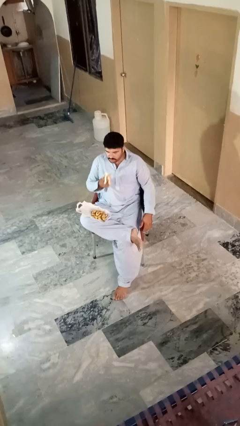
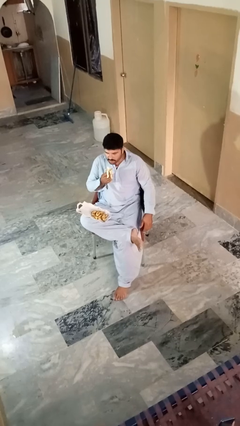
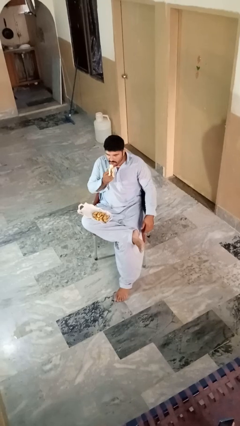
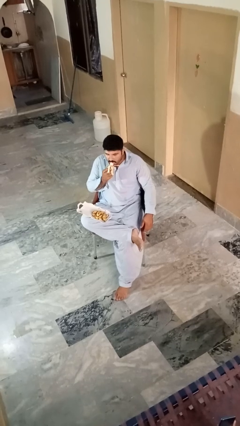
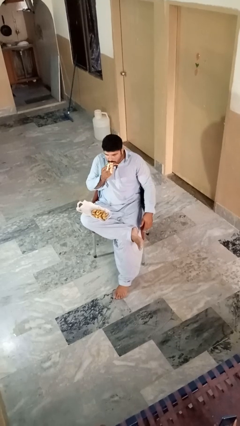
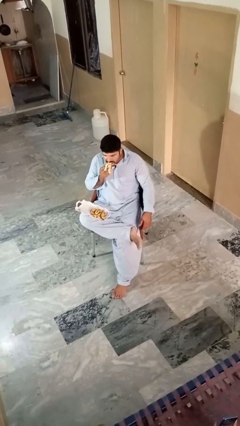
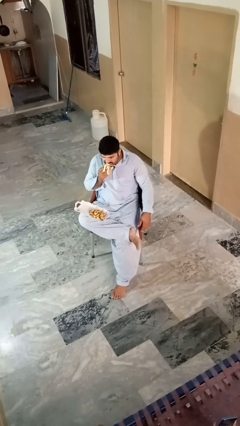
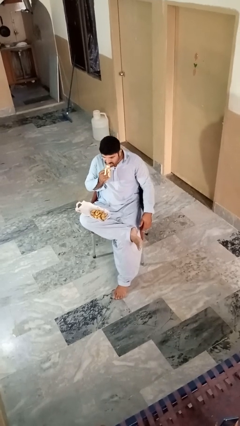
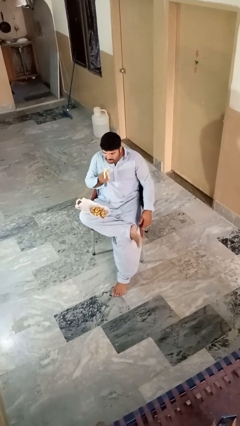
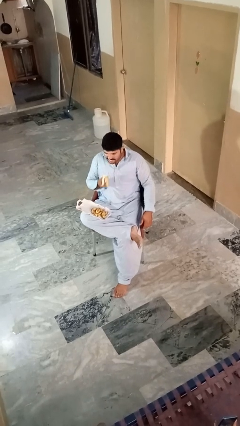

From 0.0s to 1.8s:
person eats banana

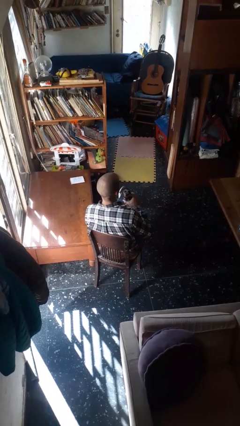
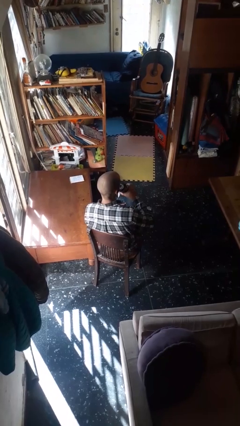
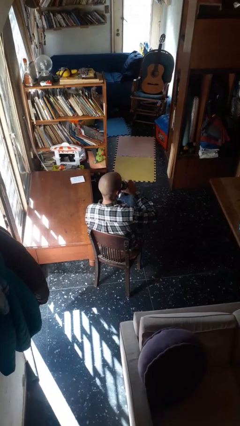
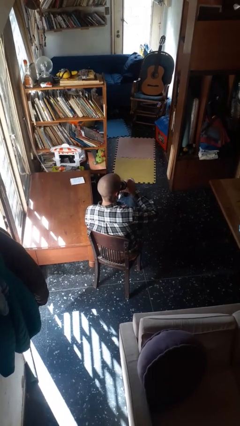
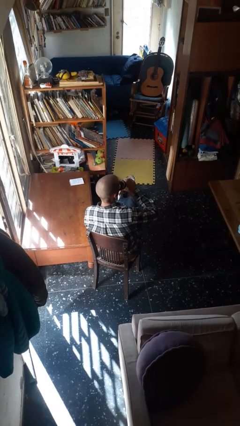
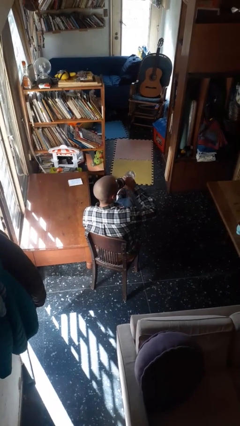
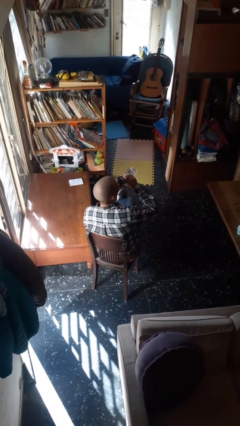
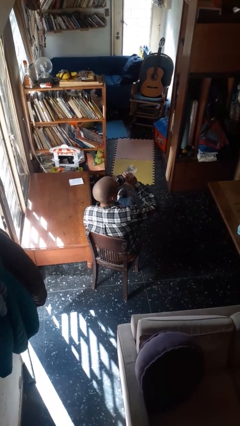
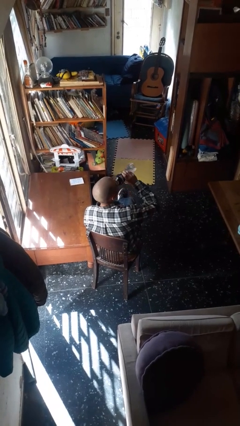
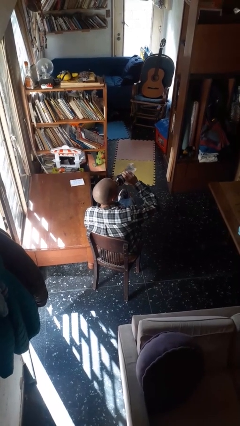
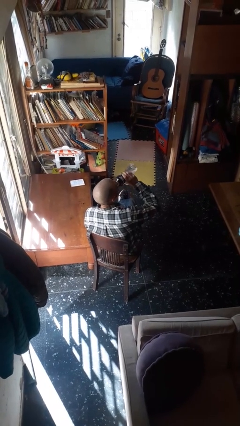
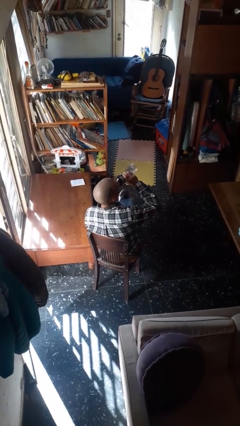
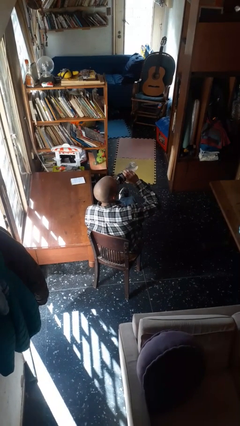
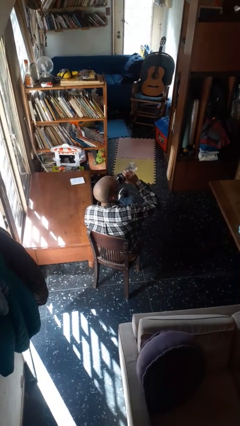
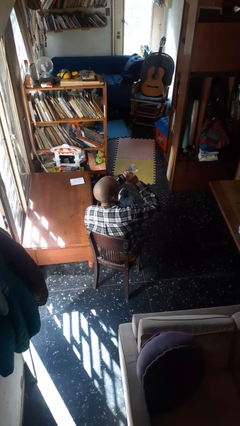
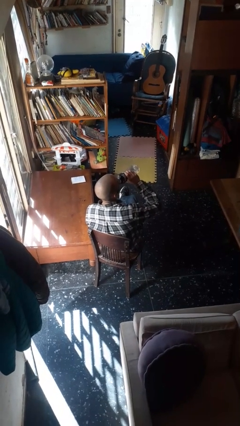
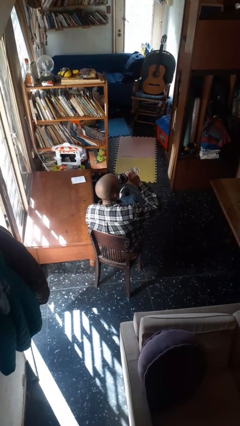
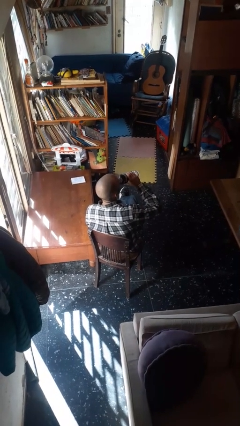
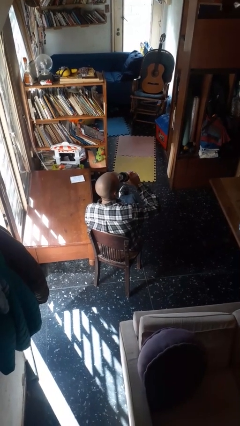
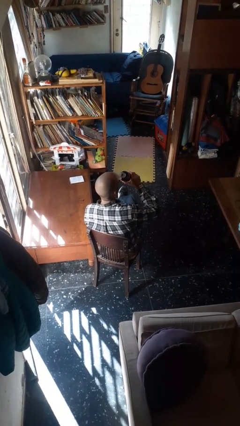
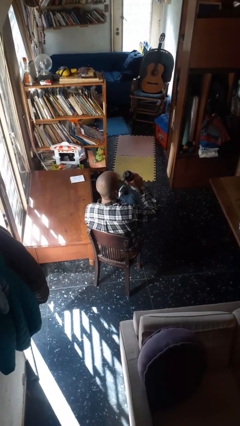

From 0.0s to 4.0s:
person drinks from bottle

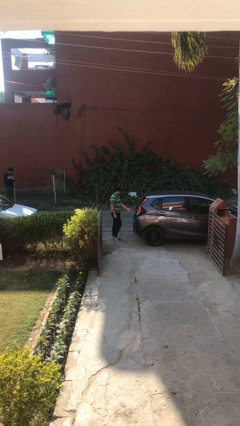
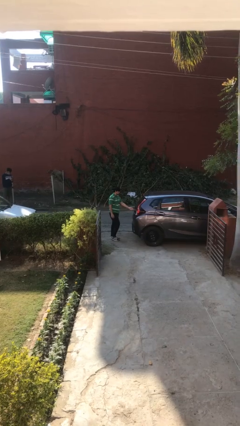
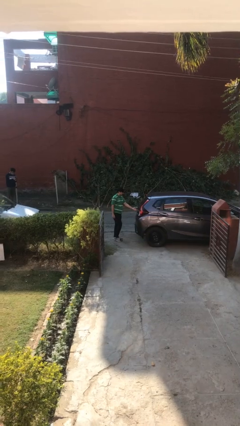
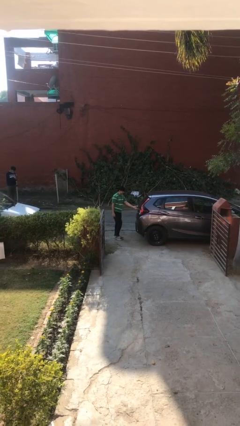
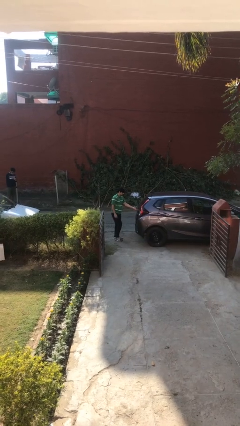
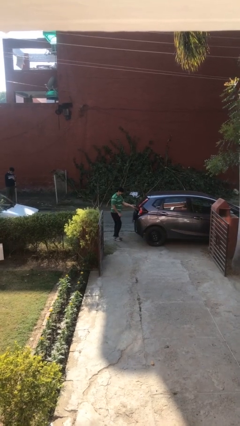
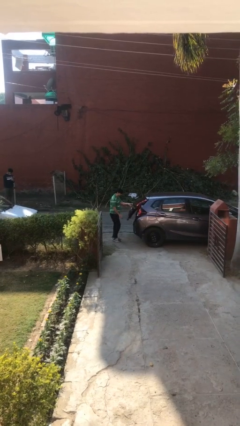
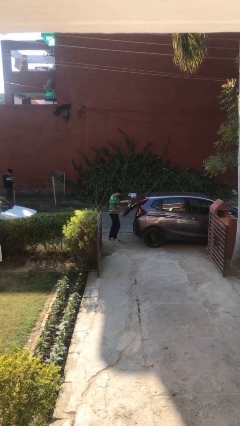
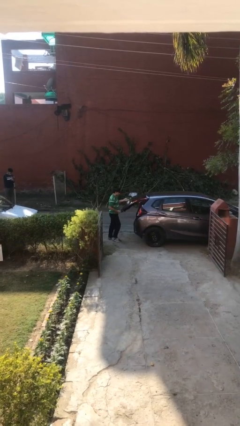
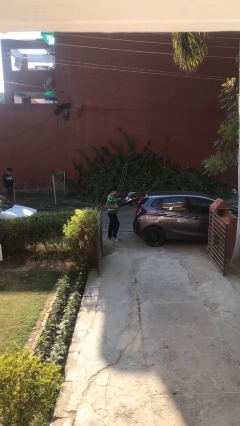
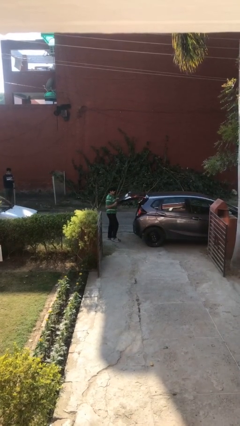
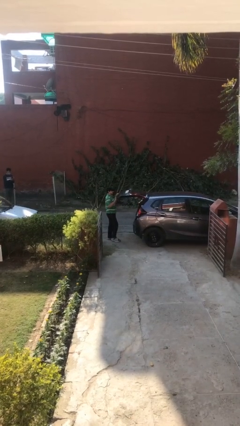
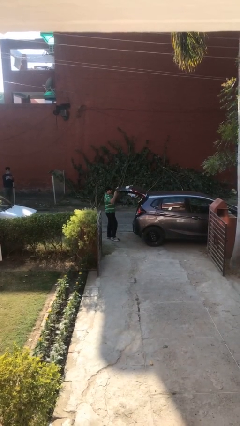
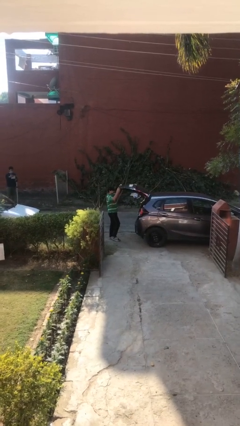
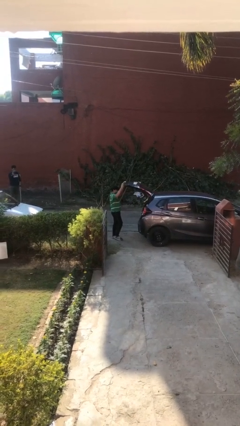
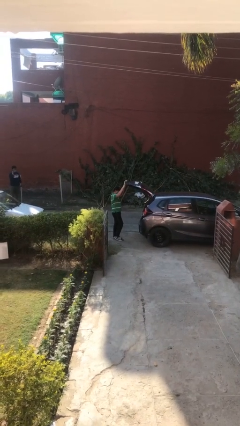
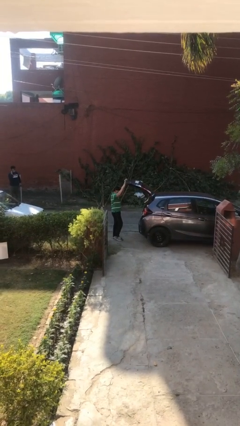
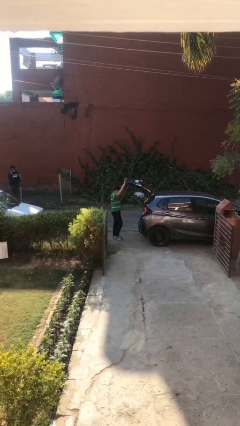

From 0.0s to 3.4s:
person opens car trunk

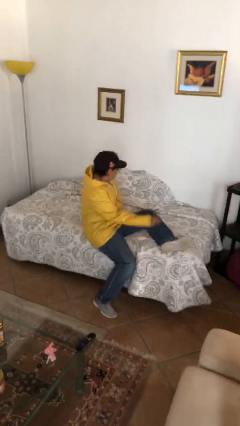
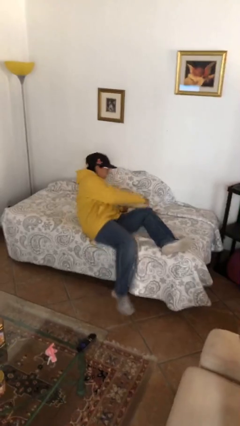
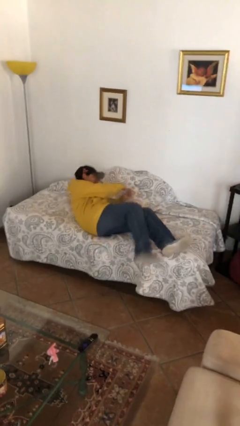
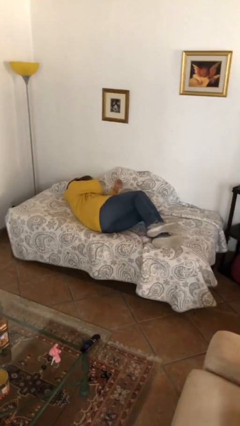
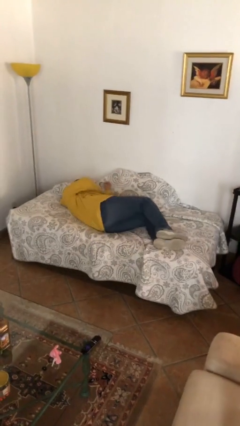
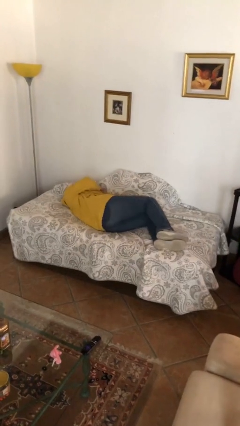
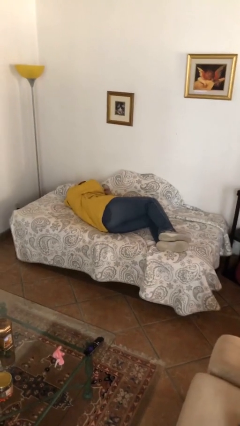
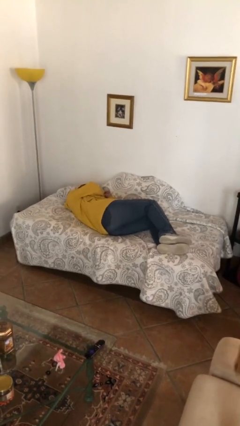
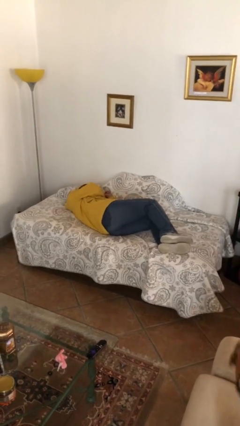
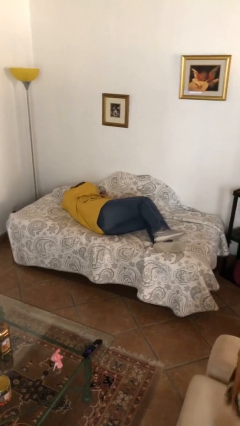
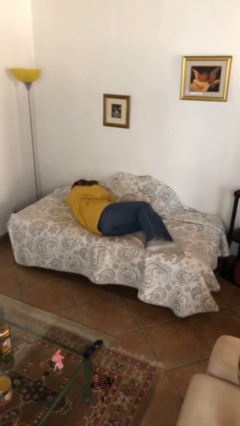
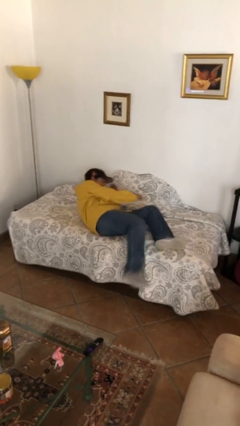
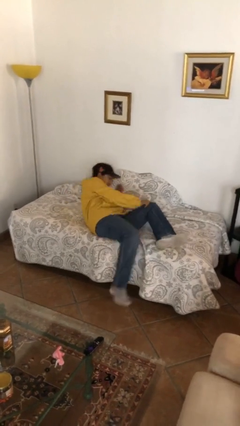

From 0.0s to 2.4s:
person lies down on bed

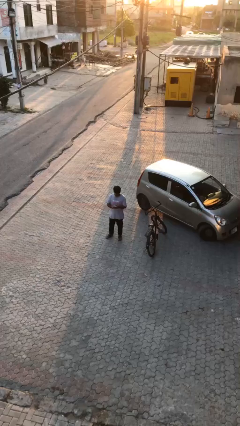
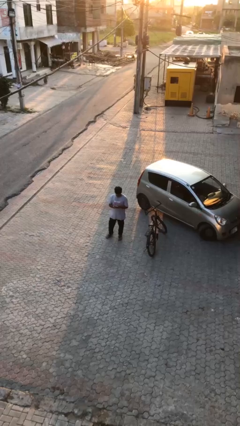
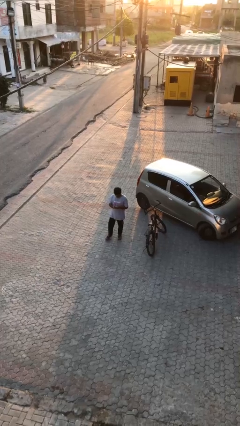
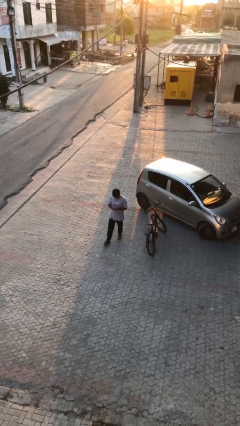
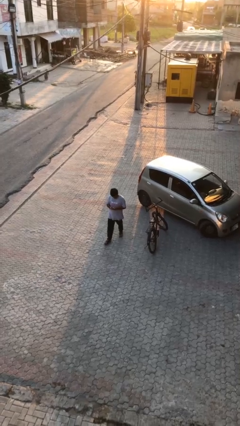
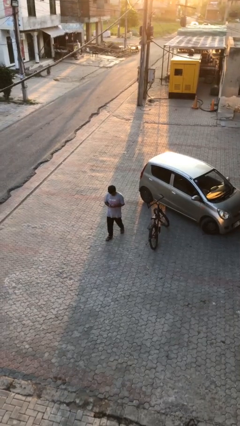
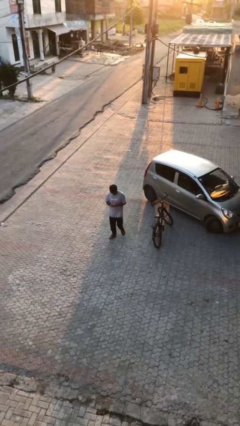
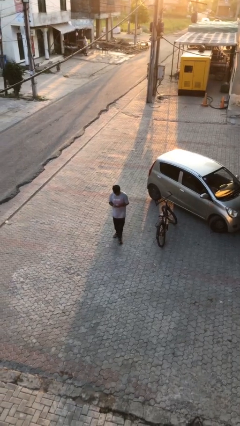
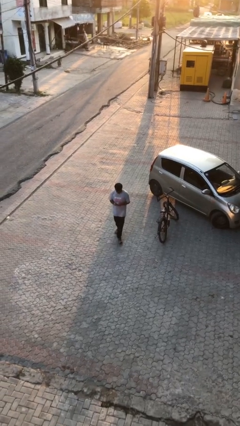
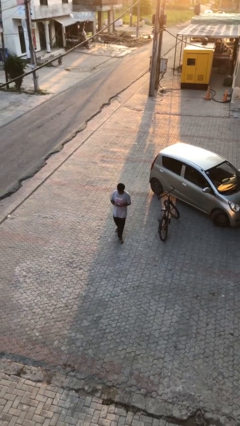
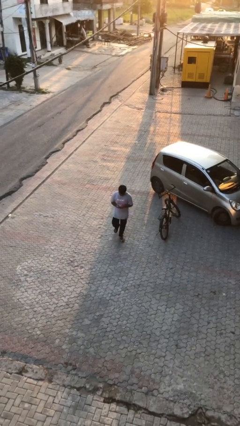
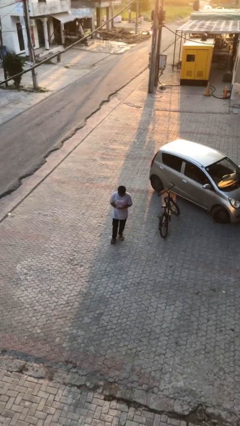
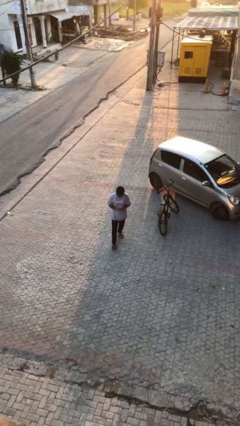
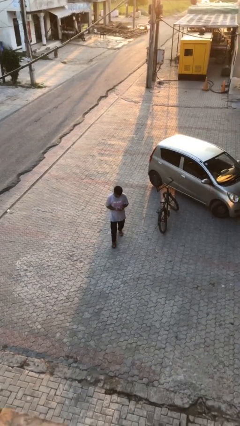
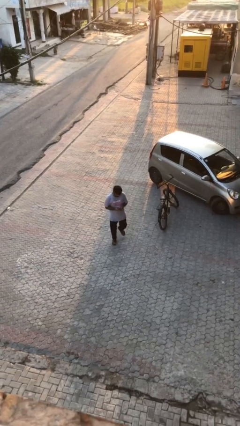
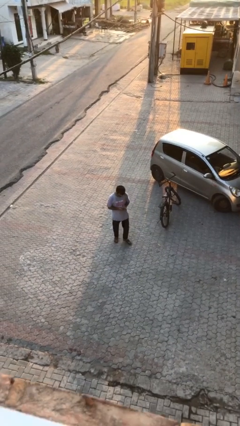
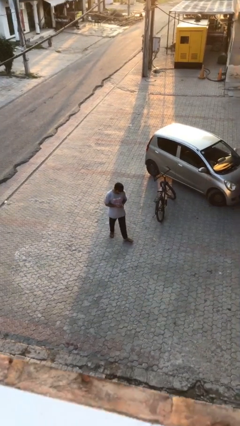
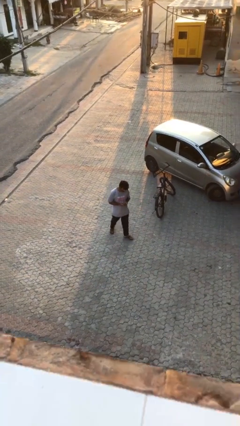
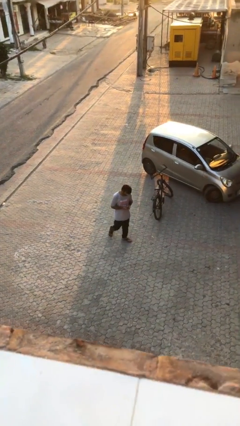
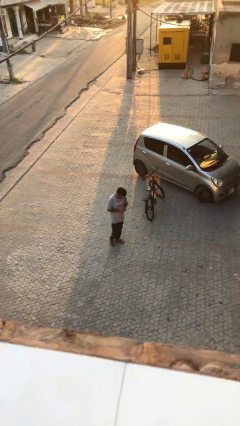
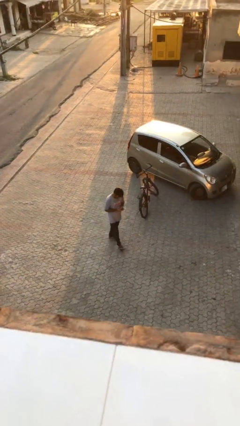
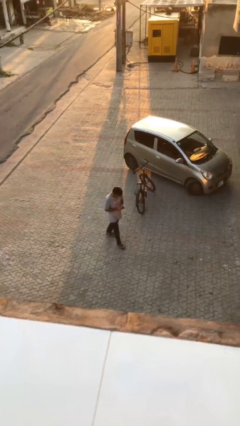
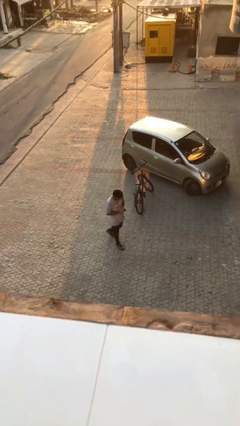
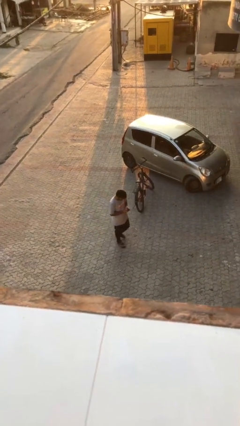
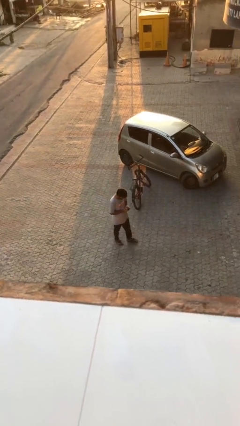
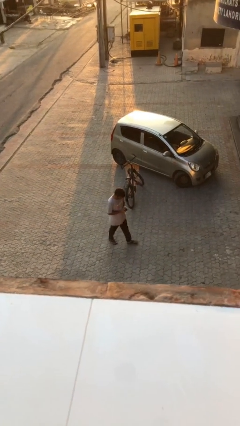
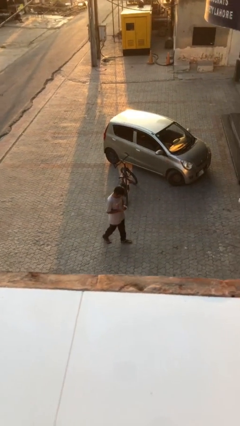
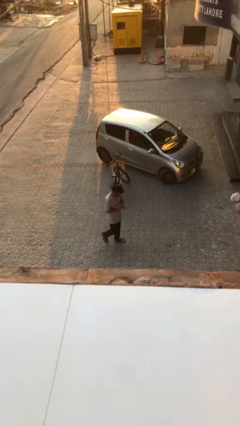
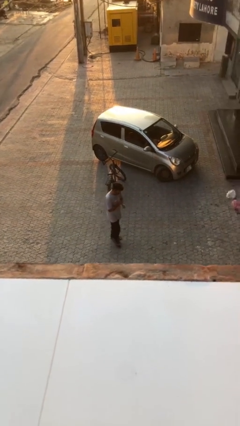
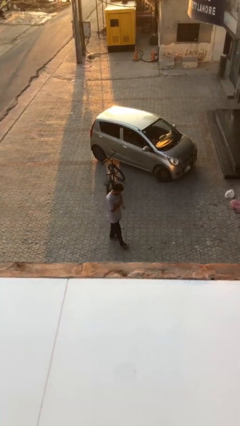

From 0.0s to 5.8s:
person texts on phone
